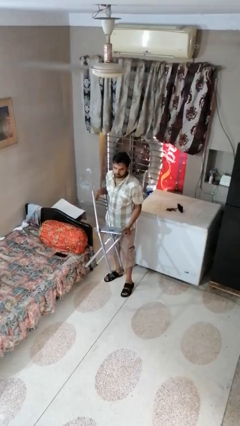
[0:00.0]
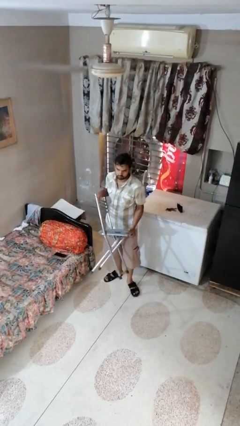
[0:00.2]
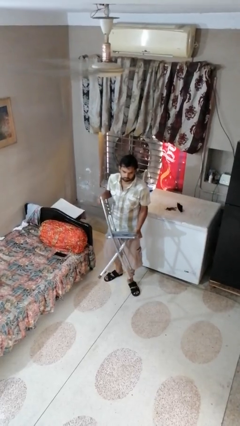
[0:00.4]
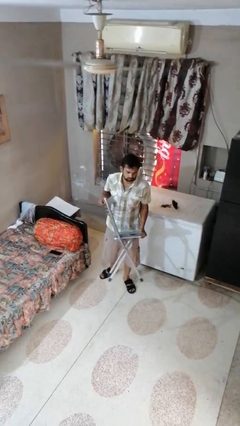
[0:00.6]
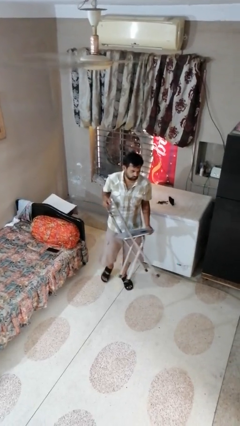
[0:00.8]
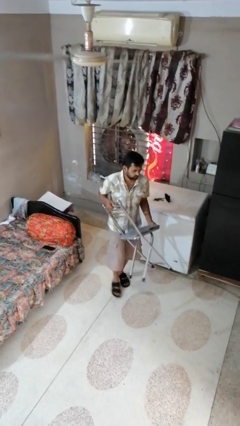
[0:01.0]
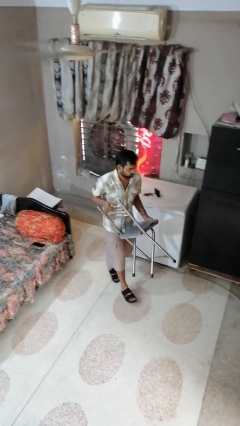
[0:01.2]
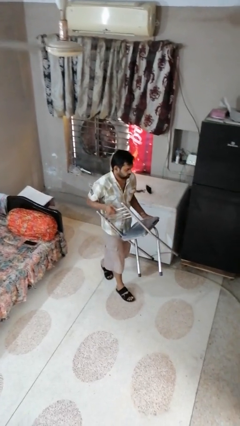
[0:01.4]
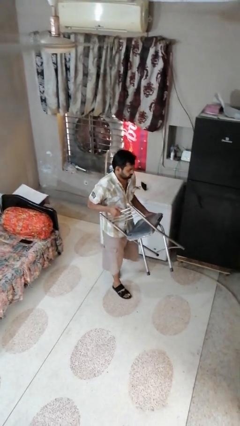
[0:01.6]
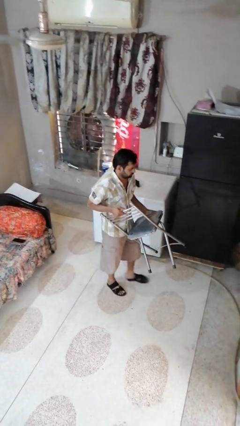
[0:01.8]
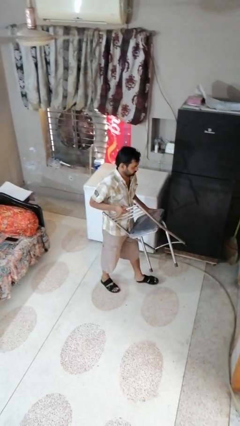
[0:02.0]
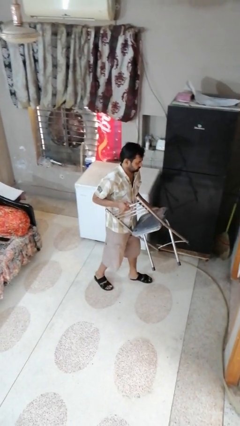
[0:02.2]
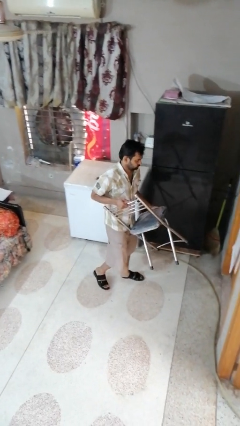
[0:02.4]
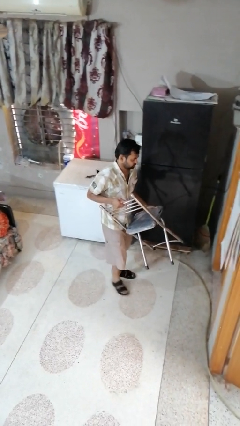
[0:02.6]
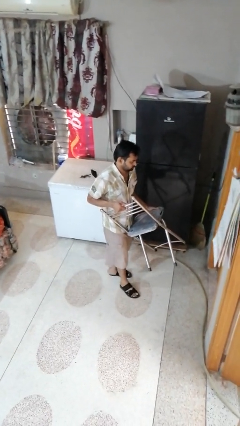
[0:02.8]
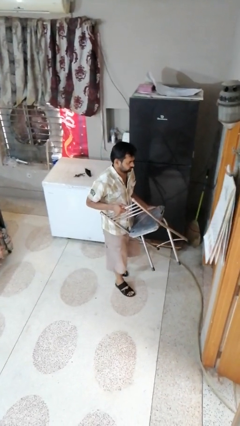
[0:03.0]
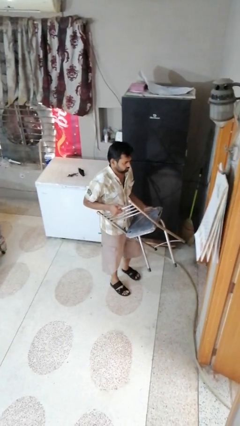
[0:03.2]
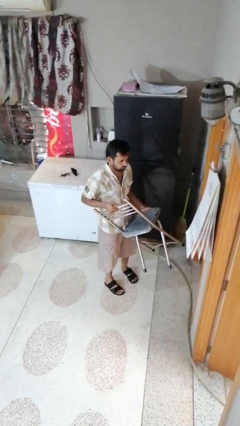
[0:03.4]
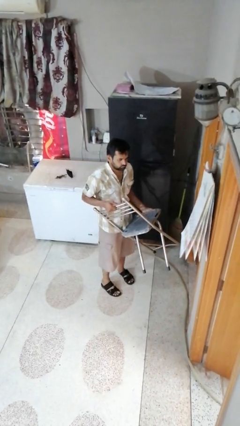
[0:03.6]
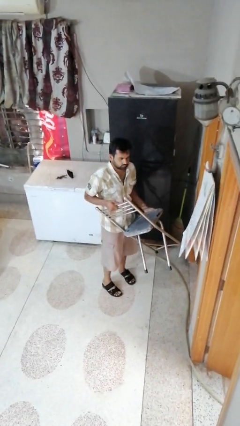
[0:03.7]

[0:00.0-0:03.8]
person carries furniture

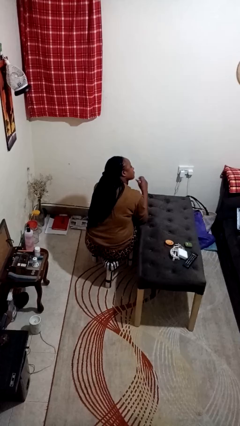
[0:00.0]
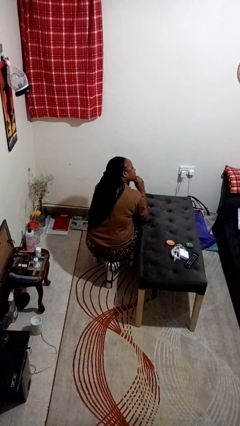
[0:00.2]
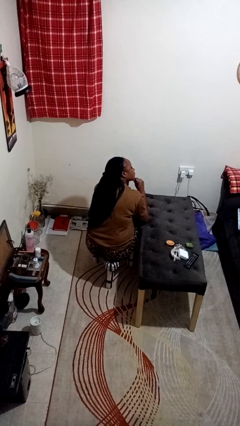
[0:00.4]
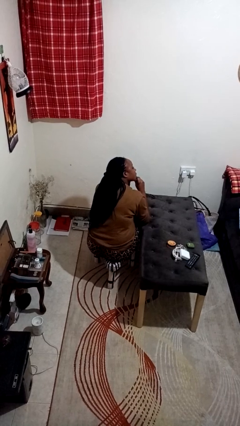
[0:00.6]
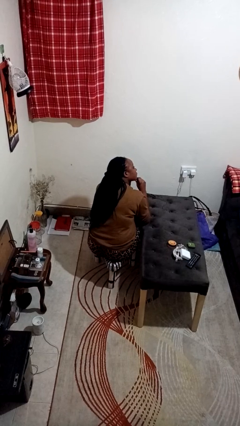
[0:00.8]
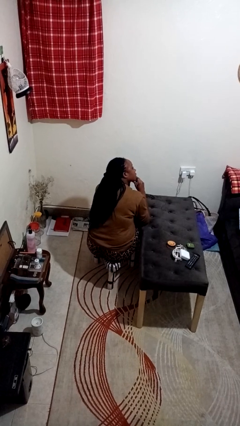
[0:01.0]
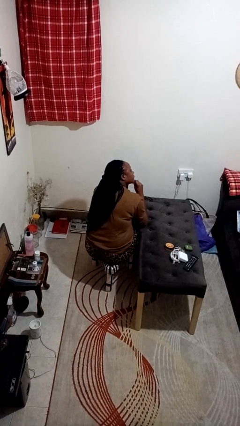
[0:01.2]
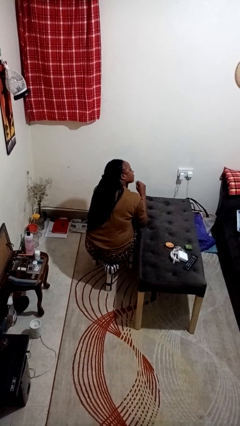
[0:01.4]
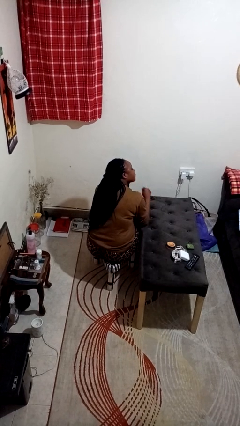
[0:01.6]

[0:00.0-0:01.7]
person strokes chin

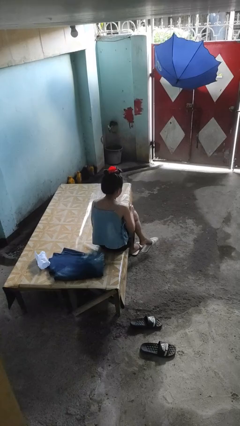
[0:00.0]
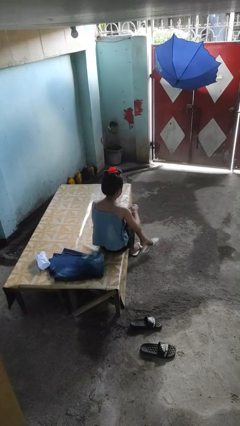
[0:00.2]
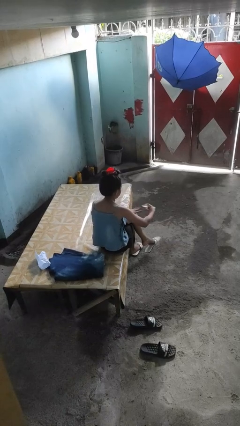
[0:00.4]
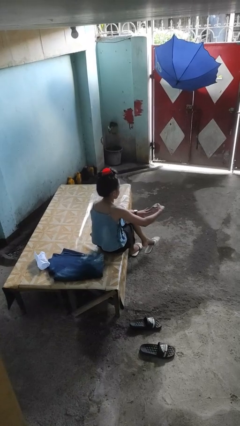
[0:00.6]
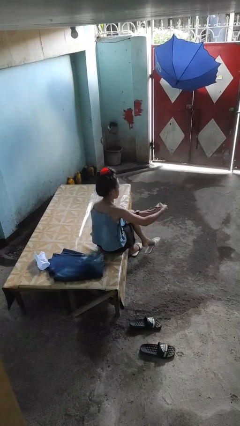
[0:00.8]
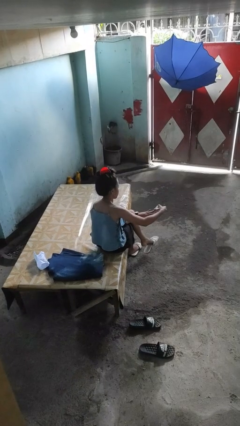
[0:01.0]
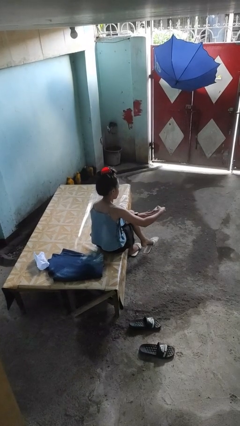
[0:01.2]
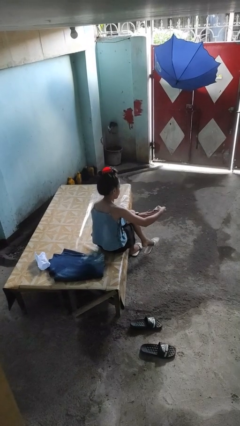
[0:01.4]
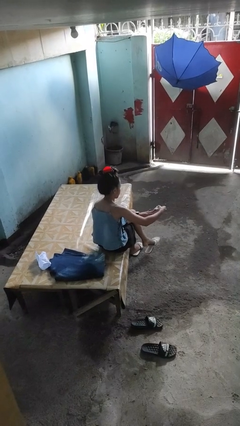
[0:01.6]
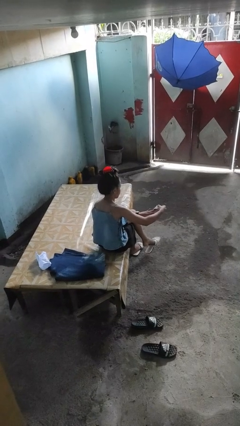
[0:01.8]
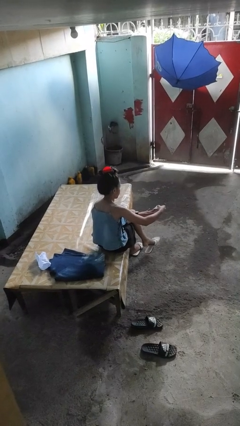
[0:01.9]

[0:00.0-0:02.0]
person clips fingernails

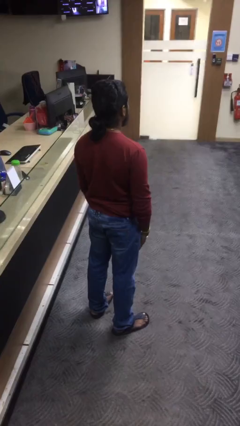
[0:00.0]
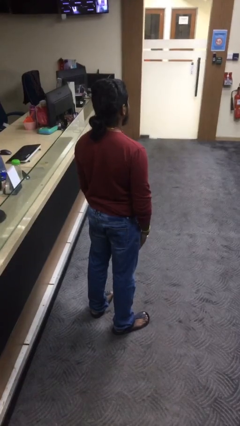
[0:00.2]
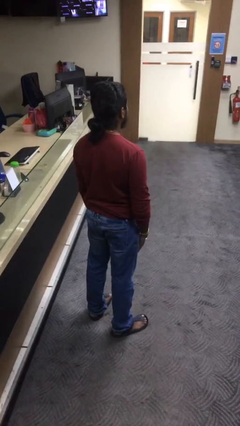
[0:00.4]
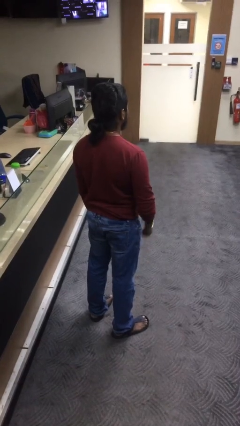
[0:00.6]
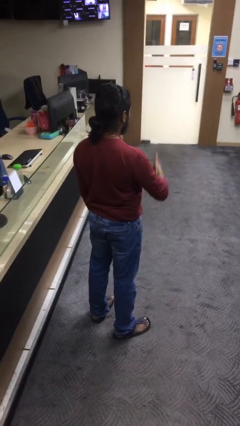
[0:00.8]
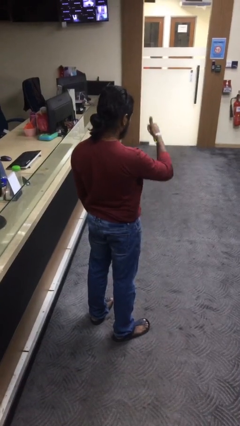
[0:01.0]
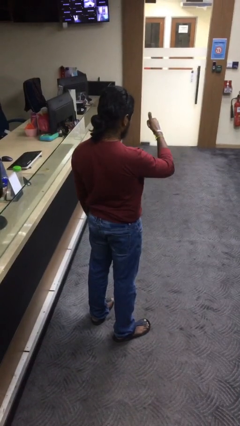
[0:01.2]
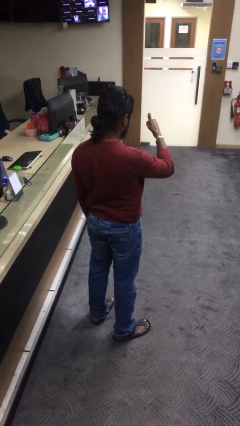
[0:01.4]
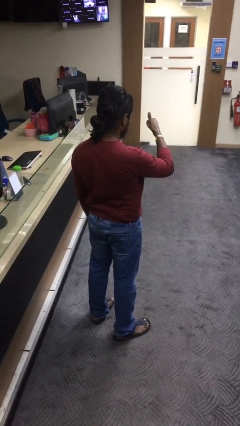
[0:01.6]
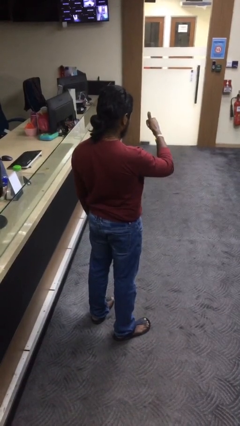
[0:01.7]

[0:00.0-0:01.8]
person gestures thumbs up

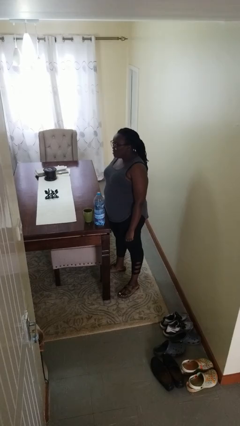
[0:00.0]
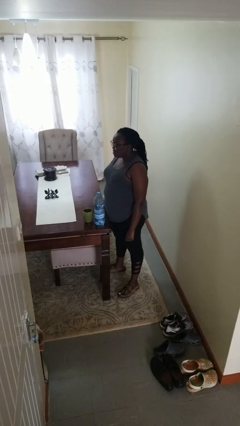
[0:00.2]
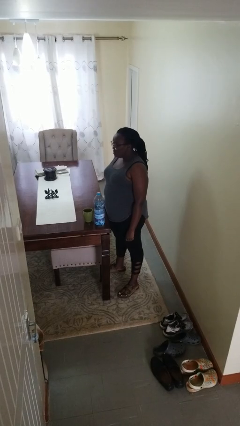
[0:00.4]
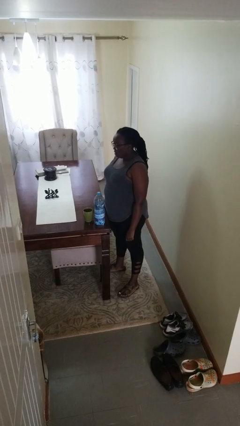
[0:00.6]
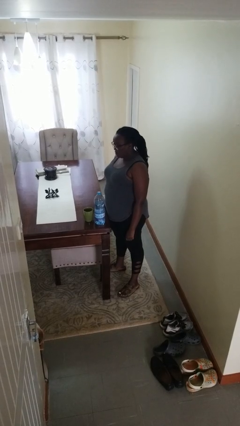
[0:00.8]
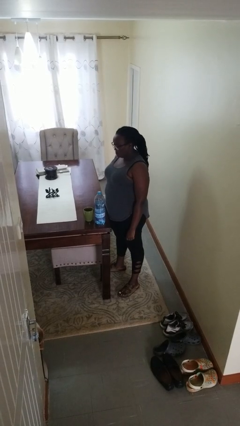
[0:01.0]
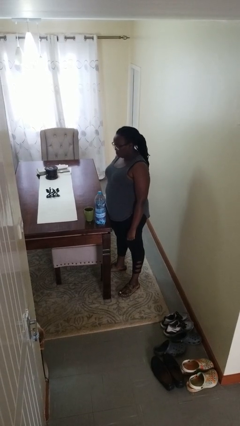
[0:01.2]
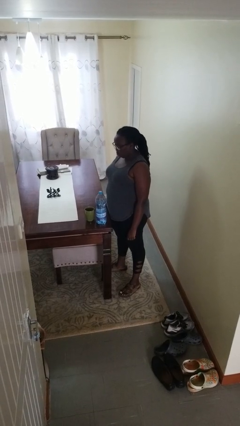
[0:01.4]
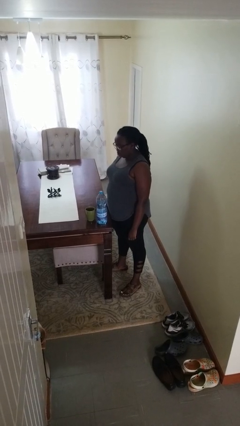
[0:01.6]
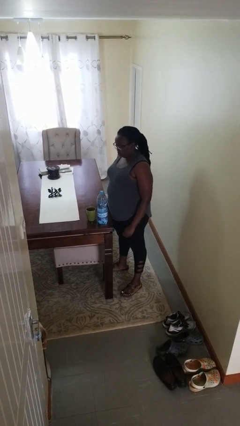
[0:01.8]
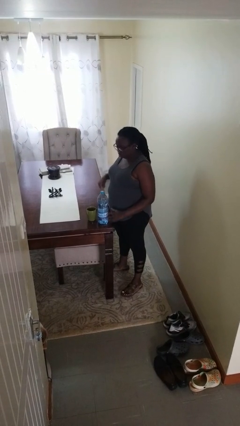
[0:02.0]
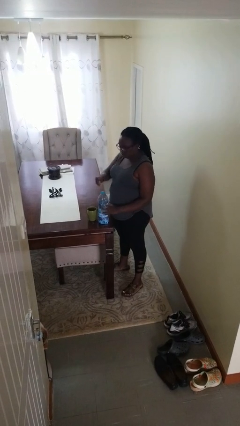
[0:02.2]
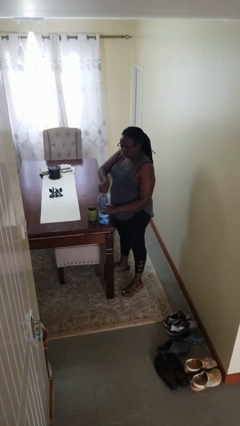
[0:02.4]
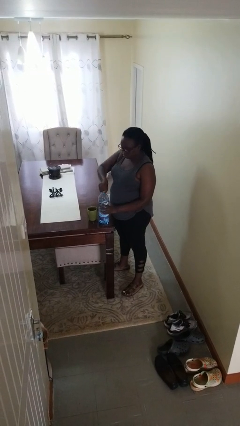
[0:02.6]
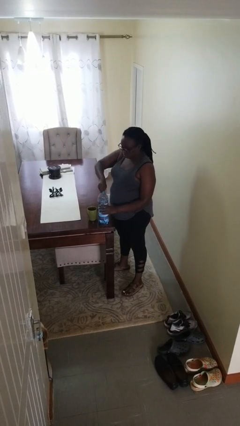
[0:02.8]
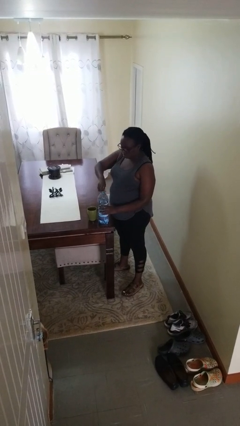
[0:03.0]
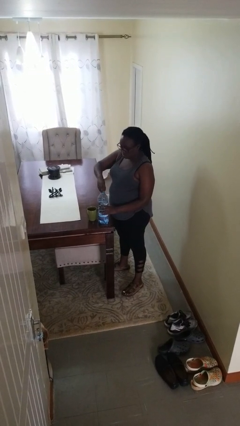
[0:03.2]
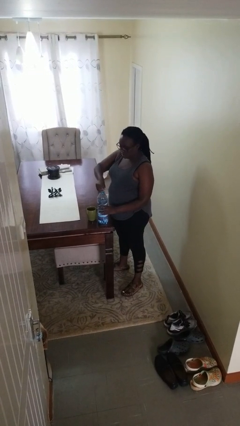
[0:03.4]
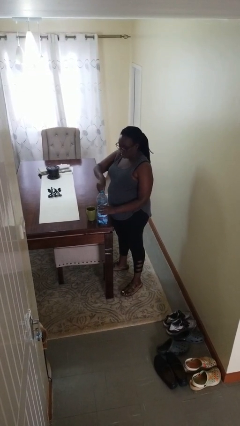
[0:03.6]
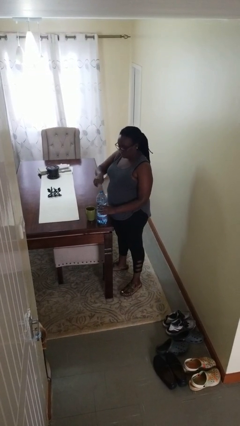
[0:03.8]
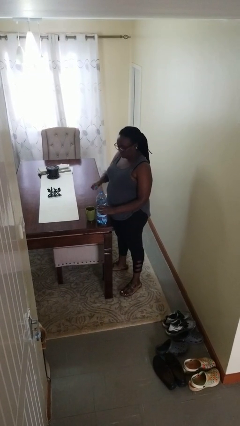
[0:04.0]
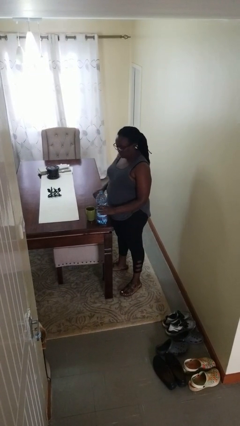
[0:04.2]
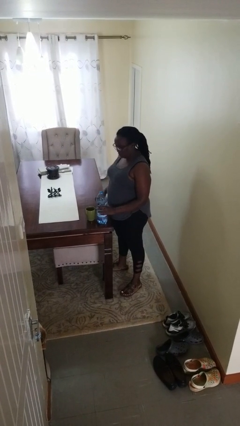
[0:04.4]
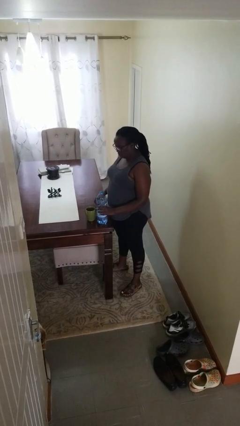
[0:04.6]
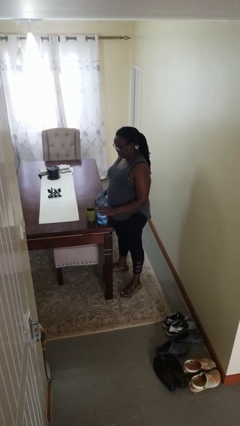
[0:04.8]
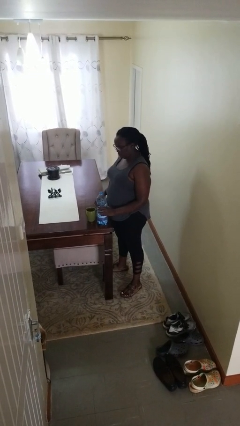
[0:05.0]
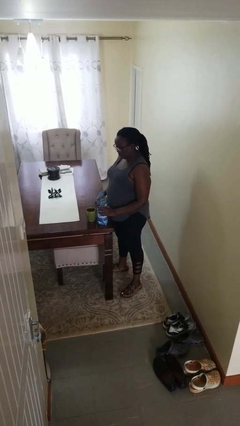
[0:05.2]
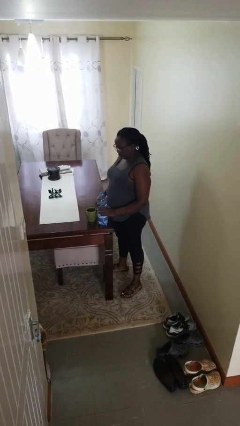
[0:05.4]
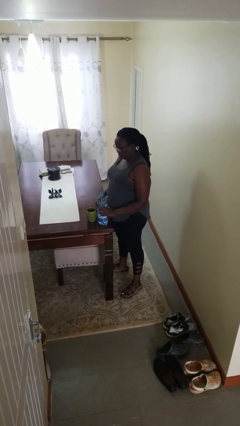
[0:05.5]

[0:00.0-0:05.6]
person unscrews lid from bottle

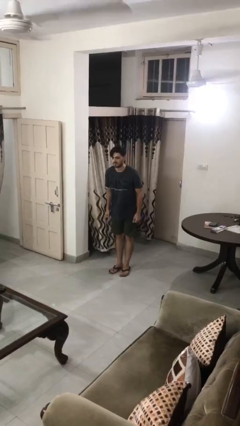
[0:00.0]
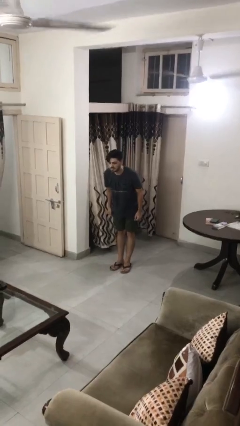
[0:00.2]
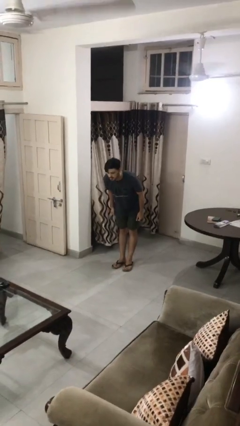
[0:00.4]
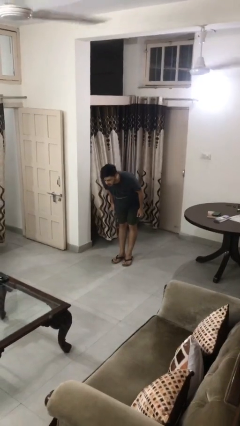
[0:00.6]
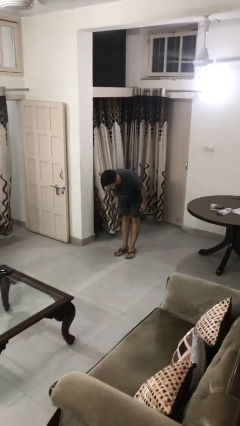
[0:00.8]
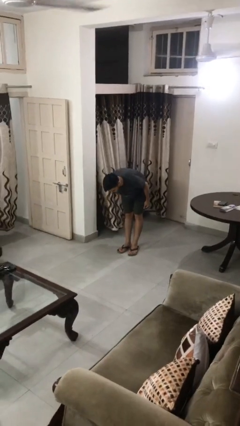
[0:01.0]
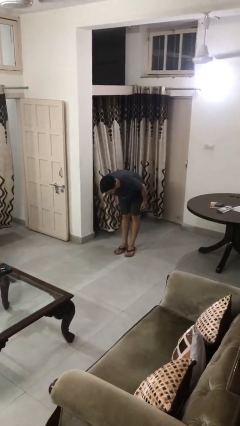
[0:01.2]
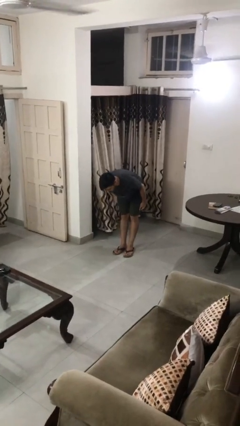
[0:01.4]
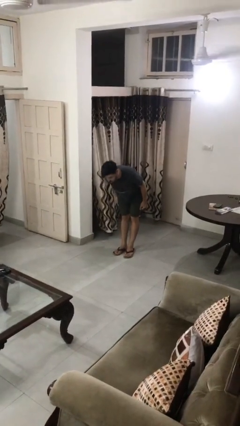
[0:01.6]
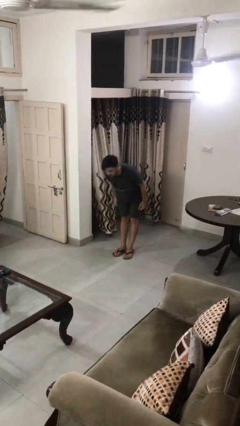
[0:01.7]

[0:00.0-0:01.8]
person bows

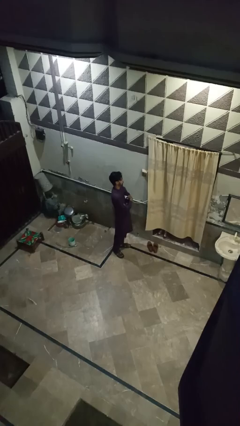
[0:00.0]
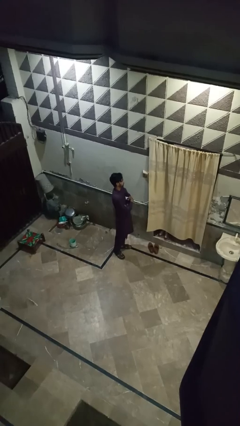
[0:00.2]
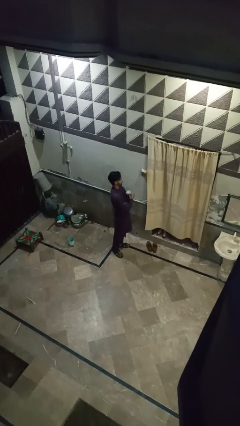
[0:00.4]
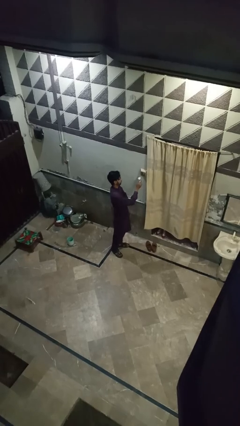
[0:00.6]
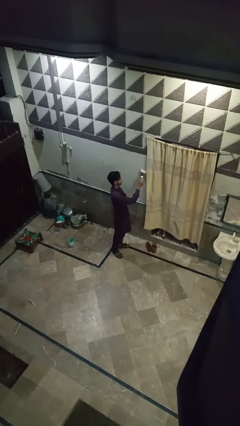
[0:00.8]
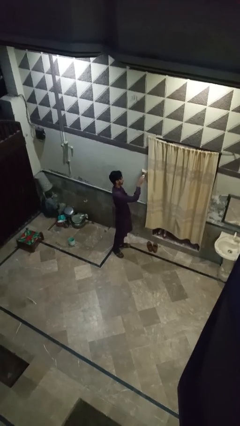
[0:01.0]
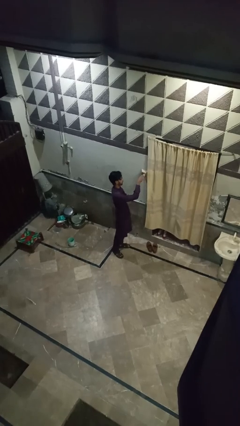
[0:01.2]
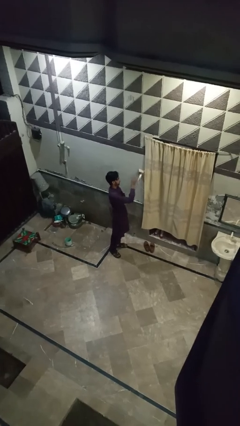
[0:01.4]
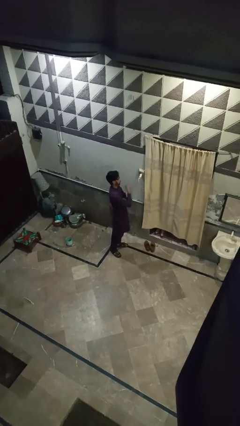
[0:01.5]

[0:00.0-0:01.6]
person plugs into electrical socket
